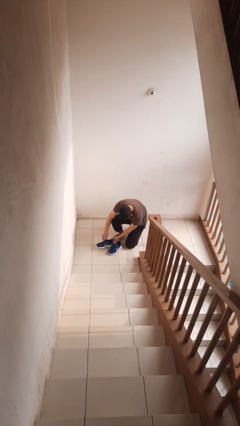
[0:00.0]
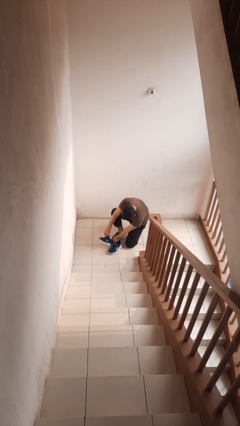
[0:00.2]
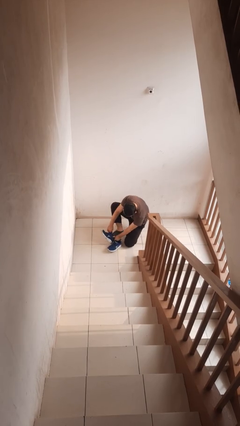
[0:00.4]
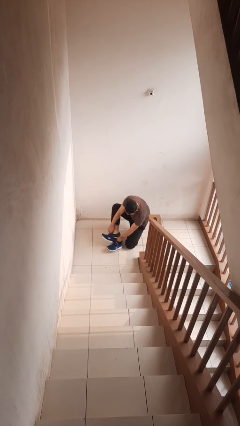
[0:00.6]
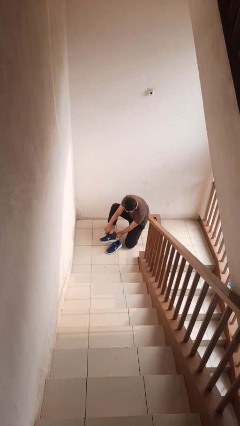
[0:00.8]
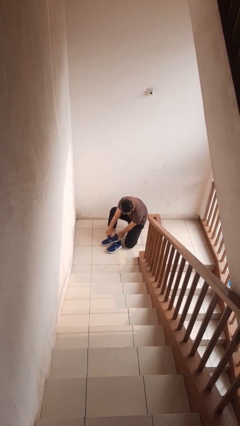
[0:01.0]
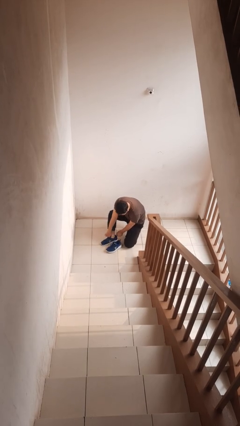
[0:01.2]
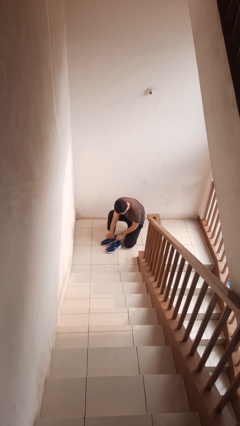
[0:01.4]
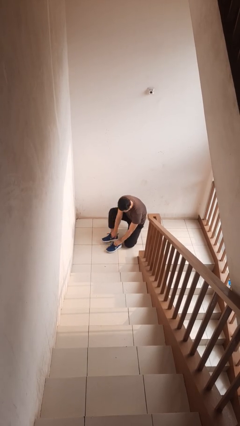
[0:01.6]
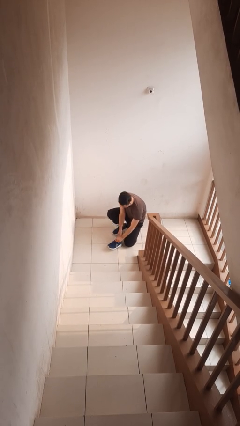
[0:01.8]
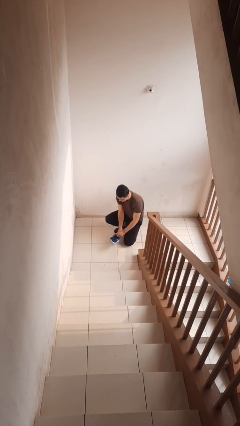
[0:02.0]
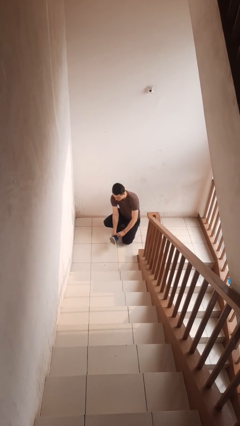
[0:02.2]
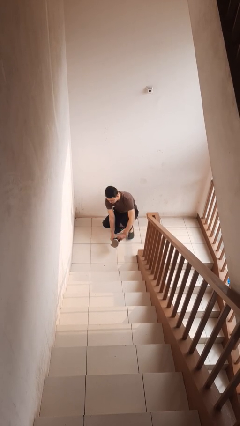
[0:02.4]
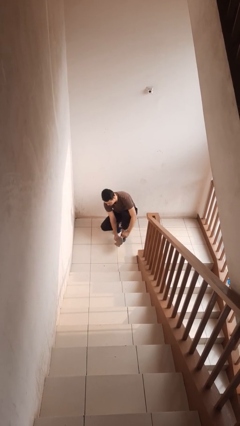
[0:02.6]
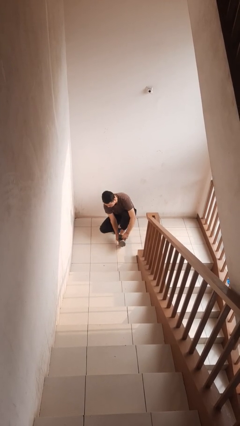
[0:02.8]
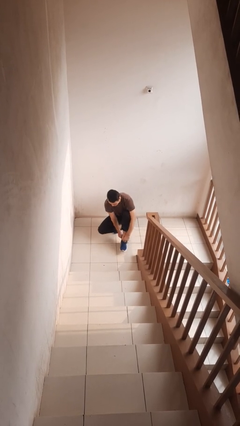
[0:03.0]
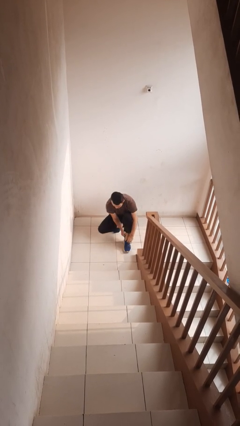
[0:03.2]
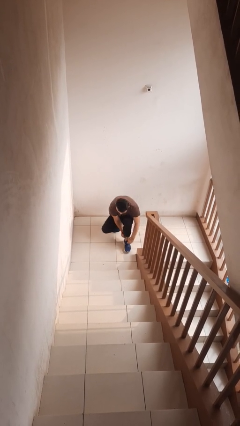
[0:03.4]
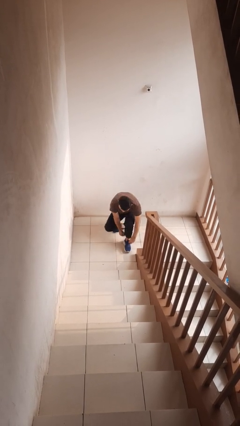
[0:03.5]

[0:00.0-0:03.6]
person puts on shoes

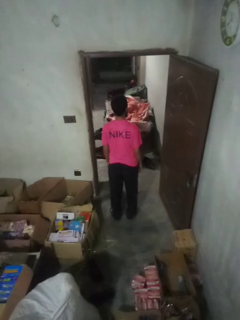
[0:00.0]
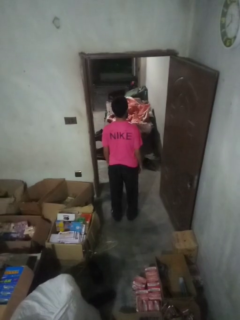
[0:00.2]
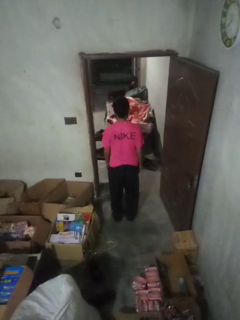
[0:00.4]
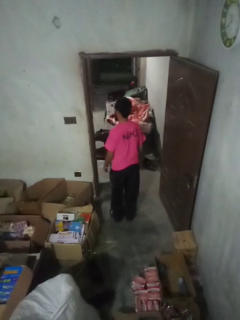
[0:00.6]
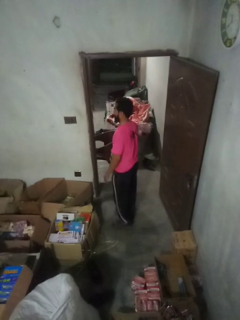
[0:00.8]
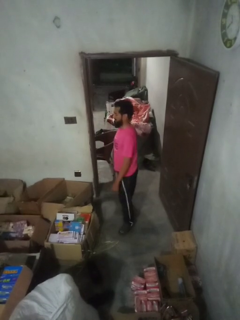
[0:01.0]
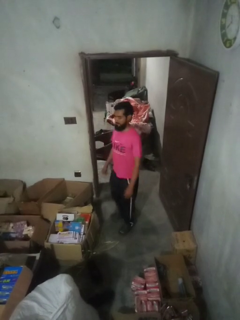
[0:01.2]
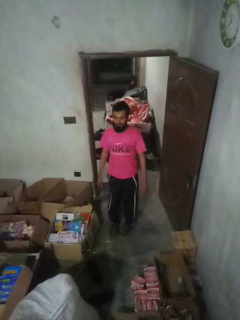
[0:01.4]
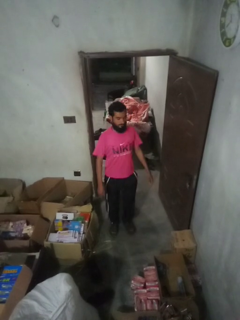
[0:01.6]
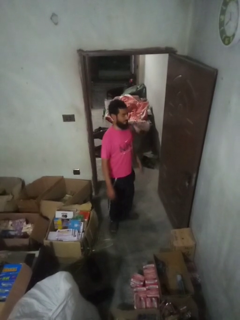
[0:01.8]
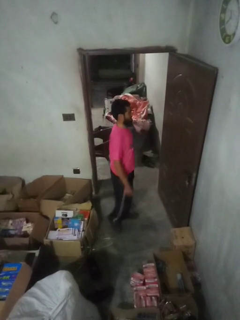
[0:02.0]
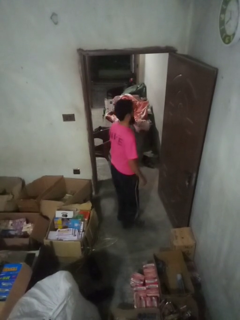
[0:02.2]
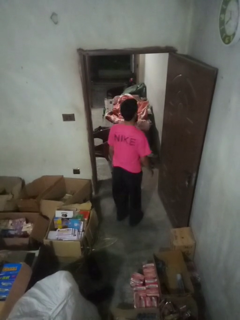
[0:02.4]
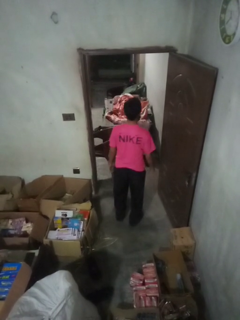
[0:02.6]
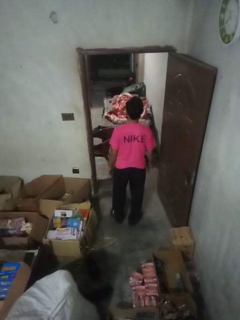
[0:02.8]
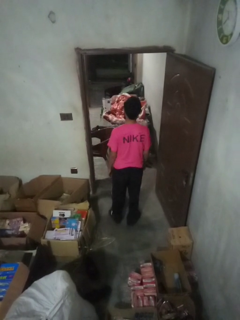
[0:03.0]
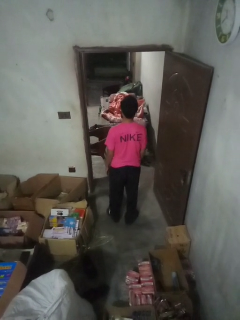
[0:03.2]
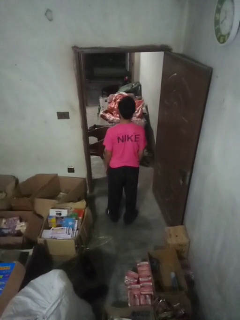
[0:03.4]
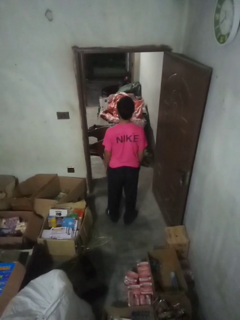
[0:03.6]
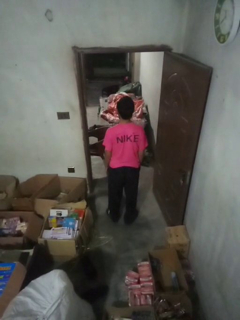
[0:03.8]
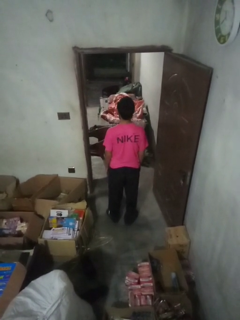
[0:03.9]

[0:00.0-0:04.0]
person twirls

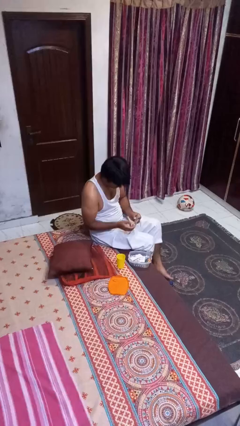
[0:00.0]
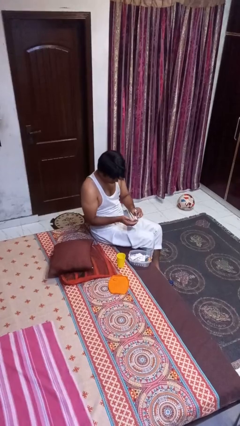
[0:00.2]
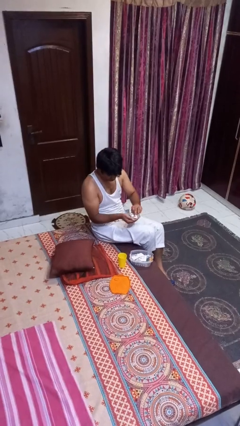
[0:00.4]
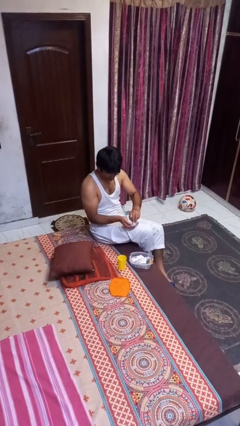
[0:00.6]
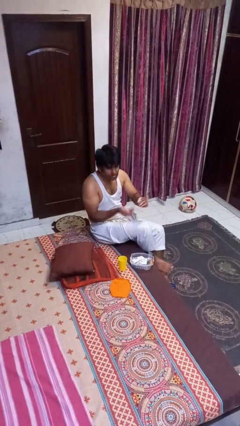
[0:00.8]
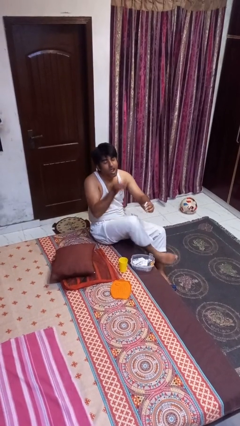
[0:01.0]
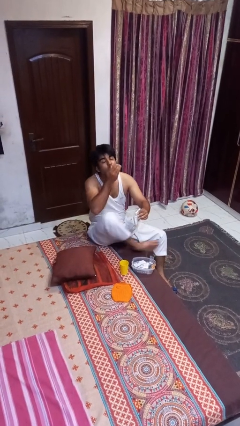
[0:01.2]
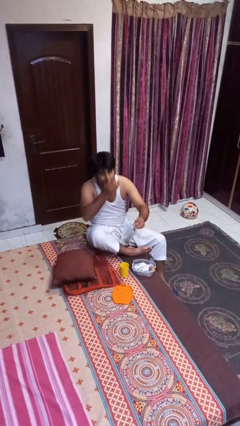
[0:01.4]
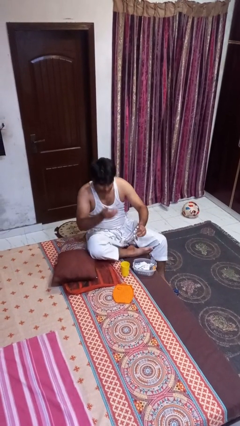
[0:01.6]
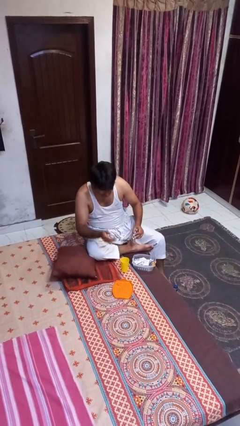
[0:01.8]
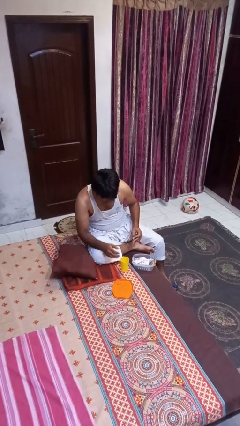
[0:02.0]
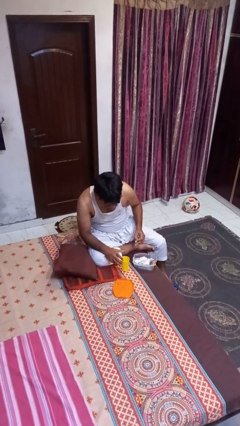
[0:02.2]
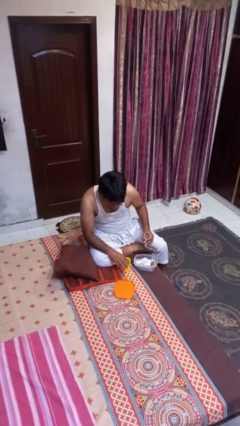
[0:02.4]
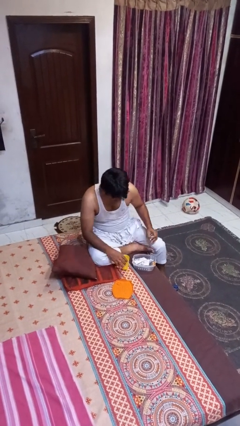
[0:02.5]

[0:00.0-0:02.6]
person takes medicine pills

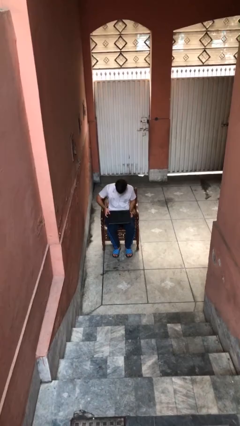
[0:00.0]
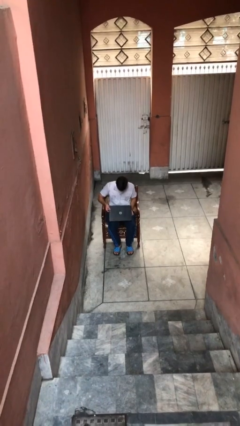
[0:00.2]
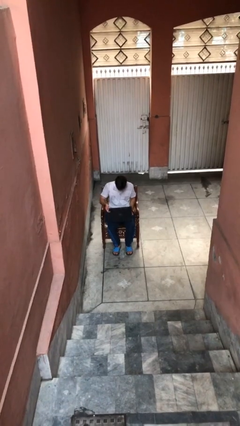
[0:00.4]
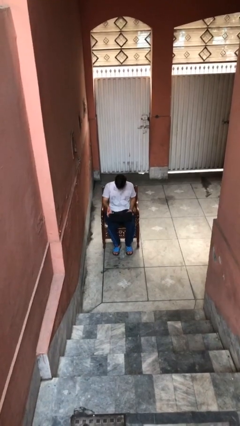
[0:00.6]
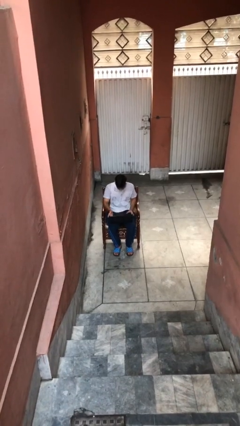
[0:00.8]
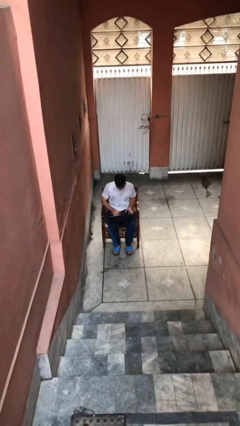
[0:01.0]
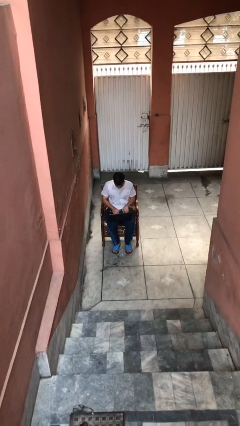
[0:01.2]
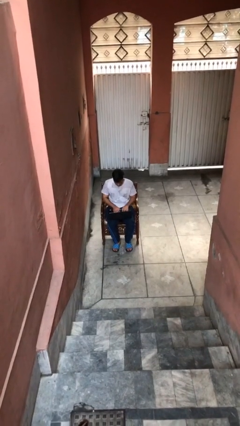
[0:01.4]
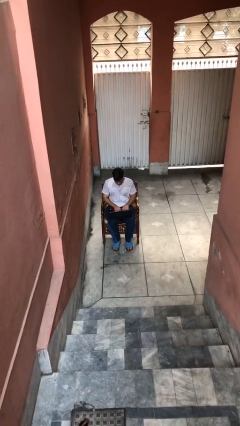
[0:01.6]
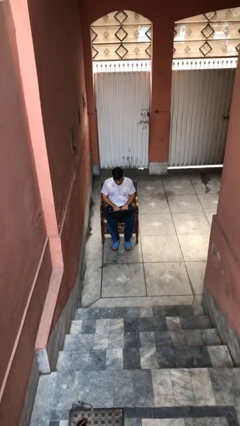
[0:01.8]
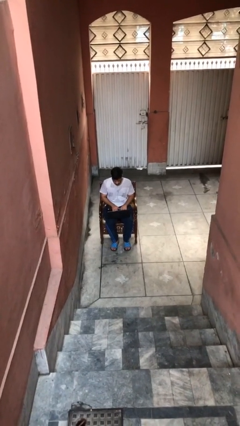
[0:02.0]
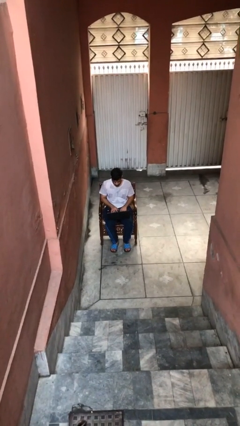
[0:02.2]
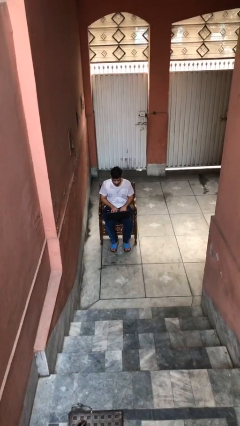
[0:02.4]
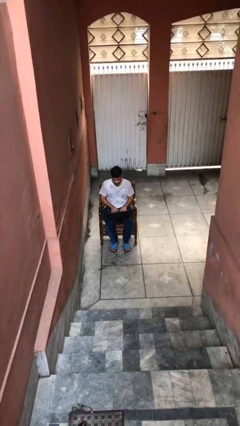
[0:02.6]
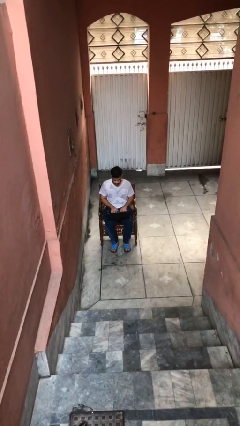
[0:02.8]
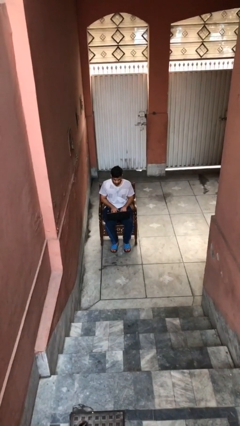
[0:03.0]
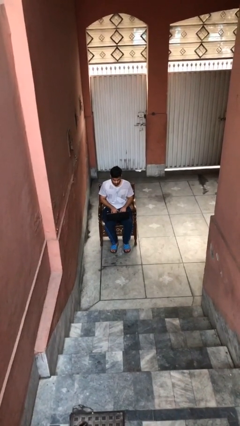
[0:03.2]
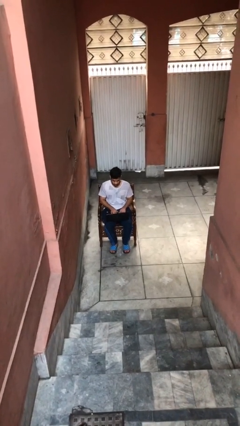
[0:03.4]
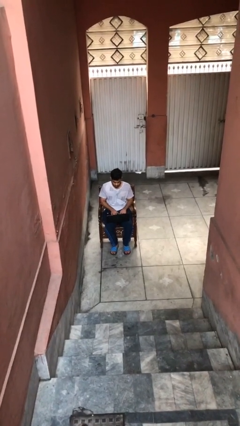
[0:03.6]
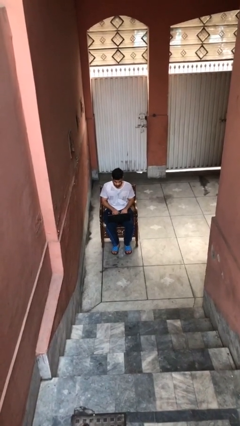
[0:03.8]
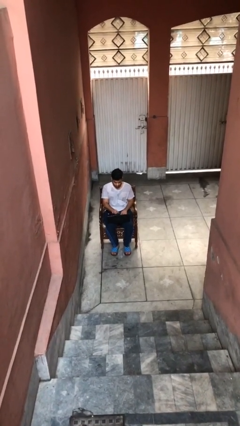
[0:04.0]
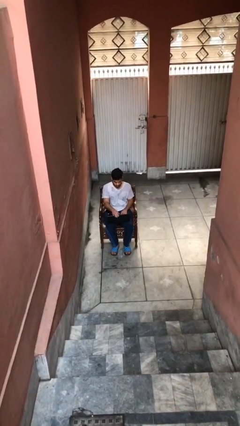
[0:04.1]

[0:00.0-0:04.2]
person interacts with laptop

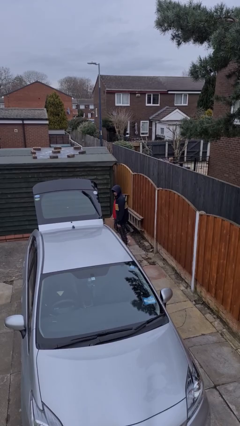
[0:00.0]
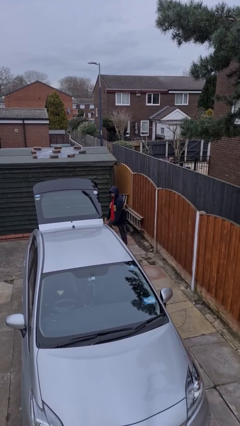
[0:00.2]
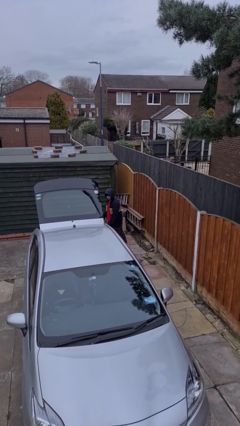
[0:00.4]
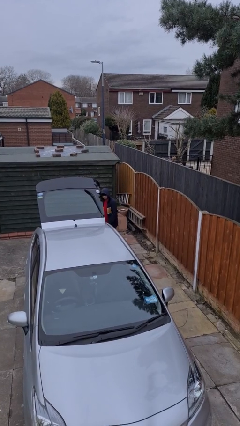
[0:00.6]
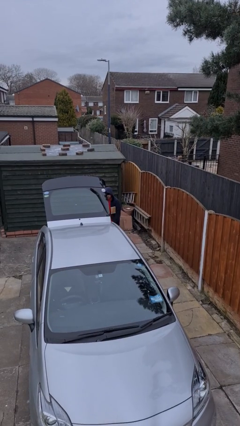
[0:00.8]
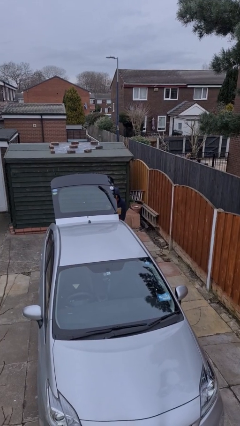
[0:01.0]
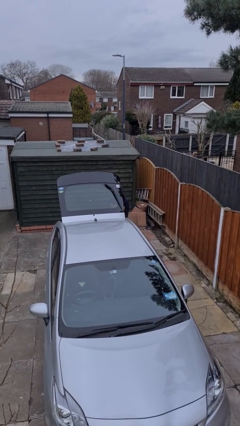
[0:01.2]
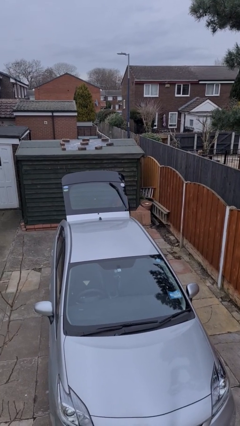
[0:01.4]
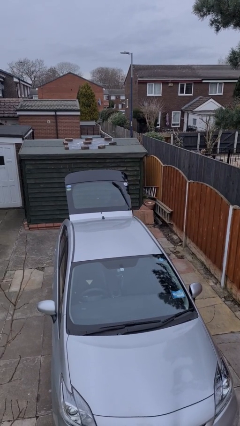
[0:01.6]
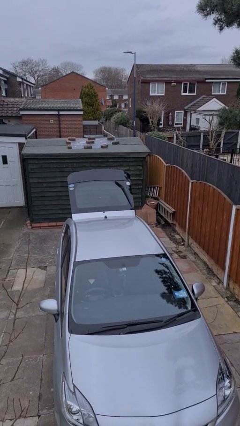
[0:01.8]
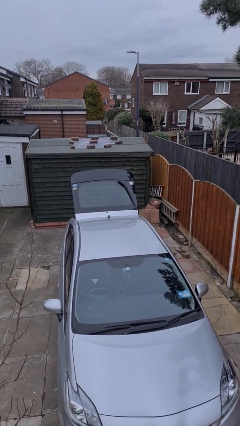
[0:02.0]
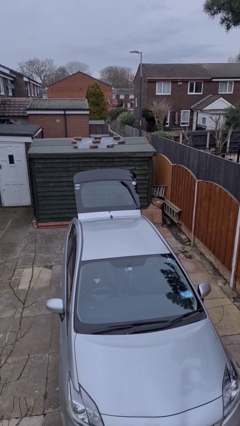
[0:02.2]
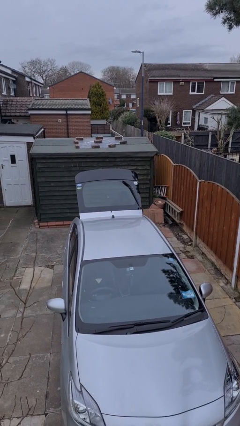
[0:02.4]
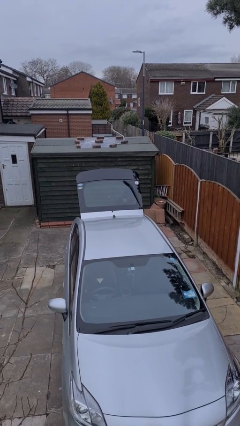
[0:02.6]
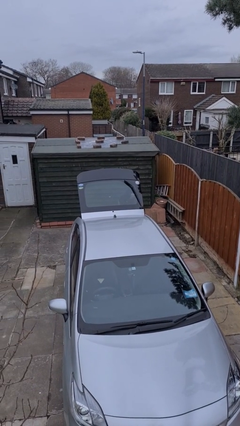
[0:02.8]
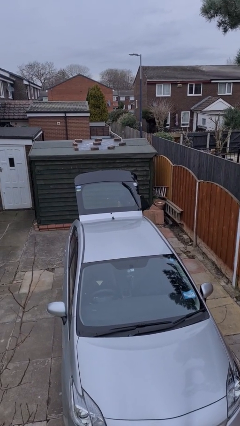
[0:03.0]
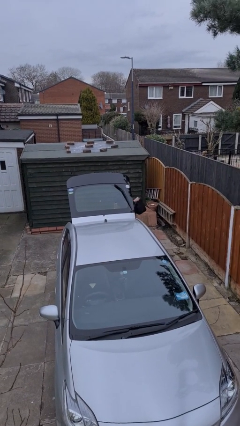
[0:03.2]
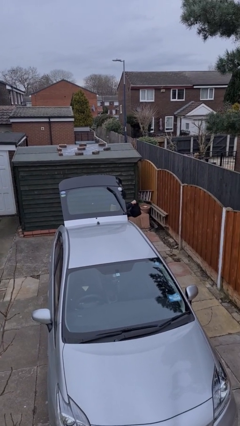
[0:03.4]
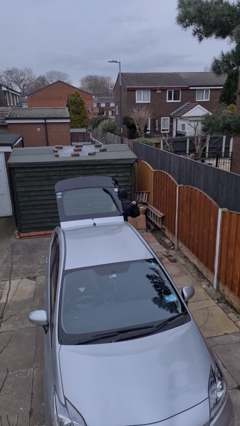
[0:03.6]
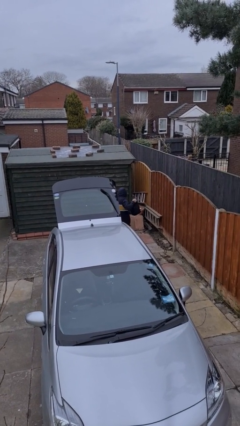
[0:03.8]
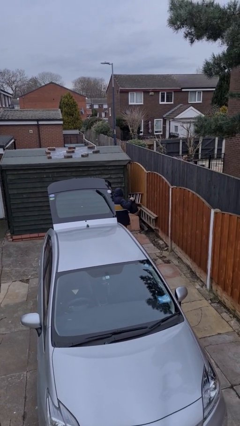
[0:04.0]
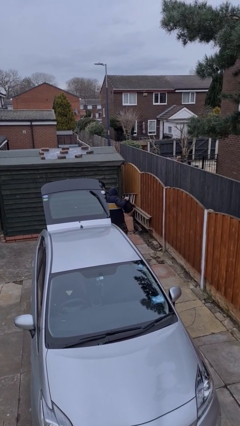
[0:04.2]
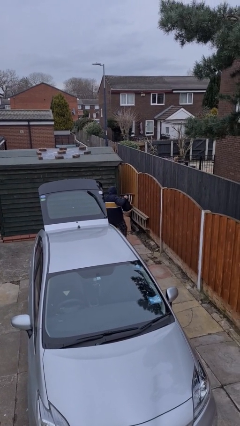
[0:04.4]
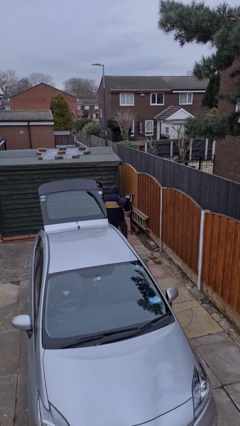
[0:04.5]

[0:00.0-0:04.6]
person unloads car
